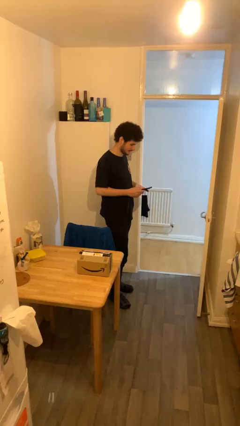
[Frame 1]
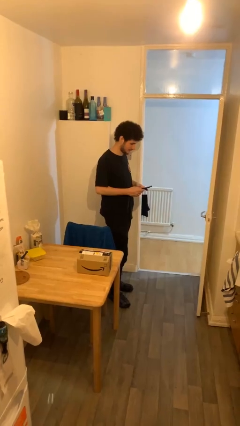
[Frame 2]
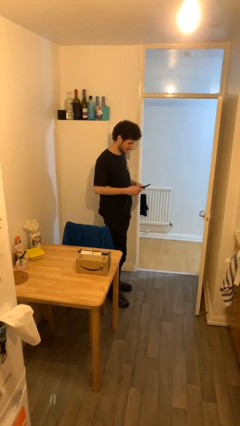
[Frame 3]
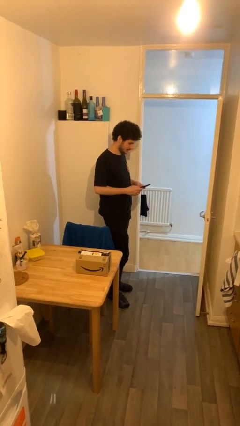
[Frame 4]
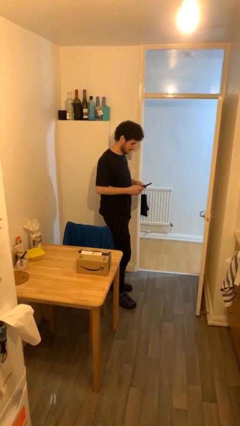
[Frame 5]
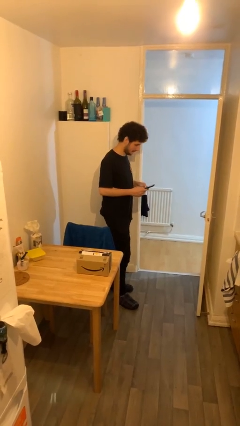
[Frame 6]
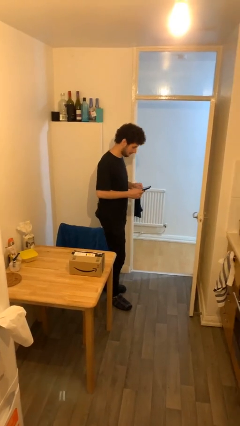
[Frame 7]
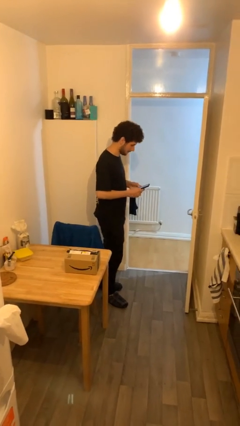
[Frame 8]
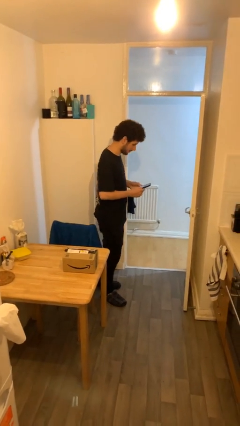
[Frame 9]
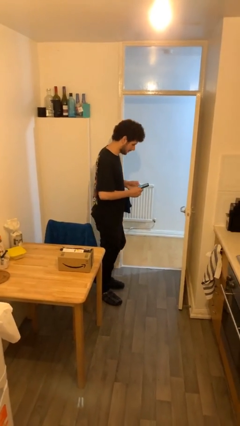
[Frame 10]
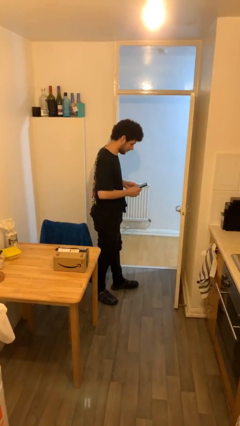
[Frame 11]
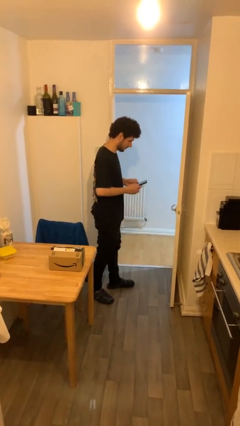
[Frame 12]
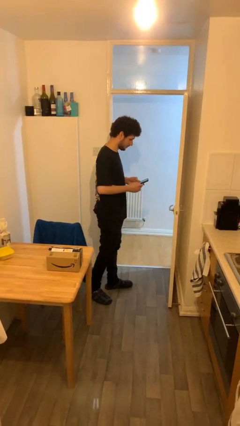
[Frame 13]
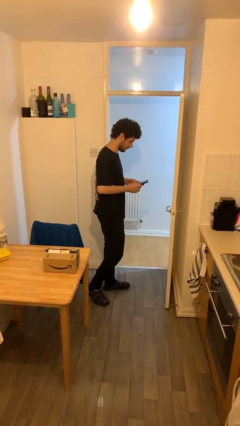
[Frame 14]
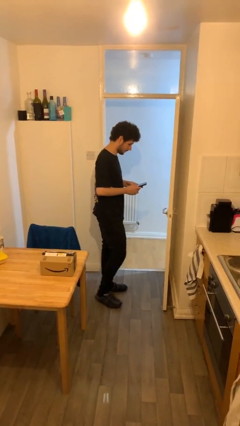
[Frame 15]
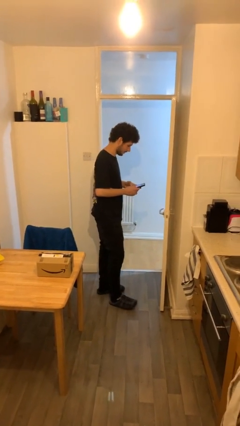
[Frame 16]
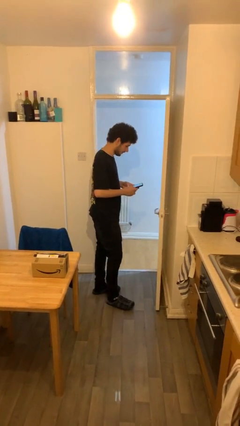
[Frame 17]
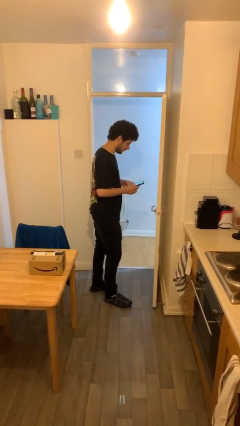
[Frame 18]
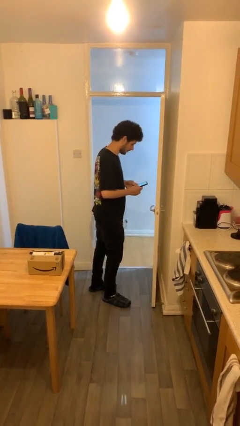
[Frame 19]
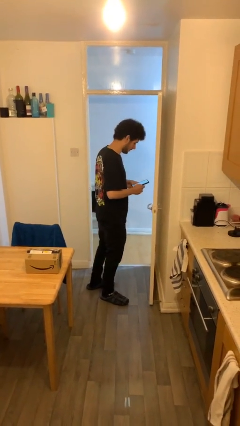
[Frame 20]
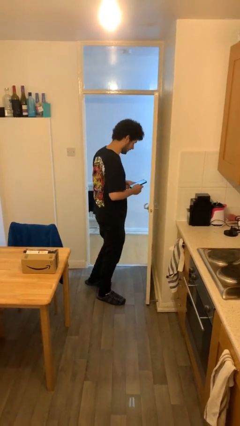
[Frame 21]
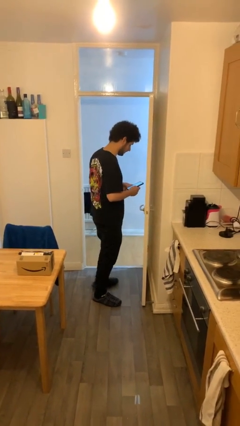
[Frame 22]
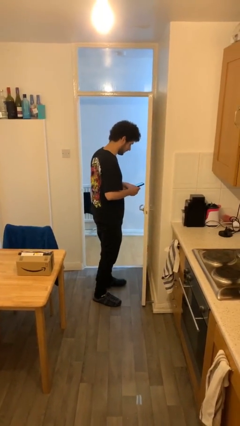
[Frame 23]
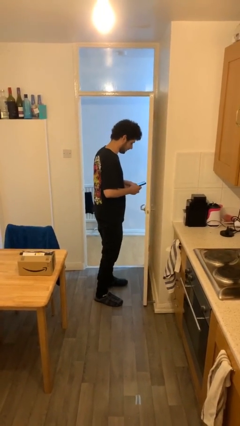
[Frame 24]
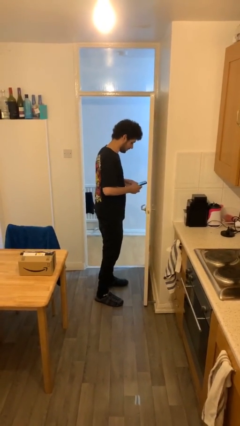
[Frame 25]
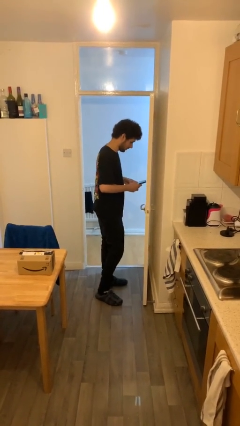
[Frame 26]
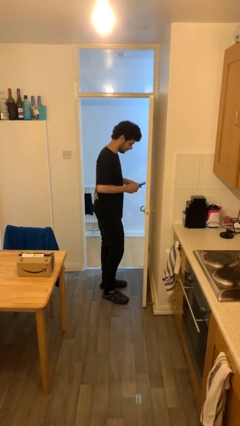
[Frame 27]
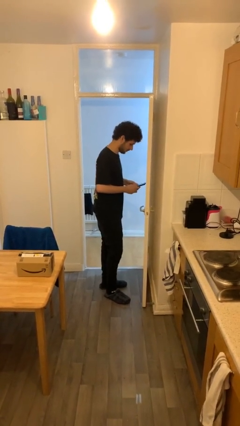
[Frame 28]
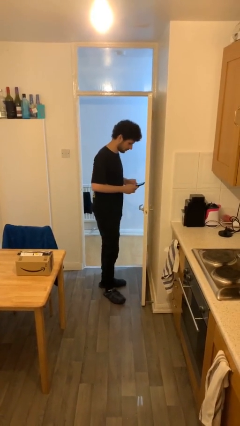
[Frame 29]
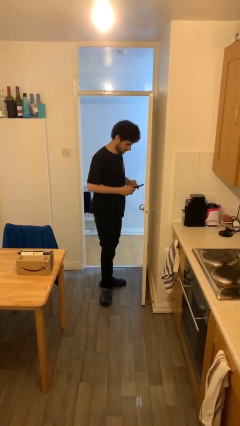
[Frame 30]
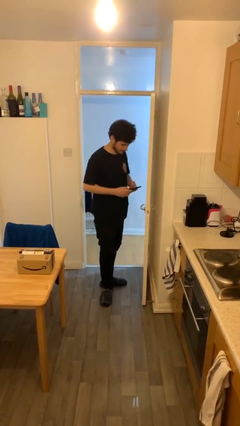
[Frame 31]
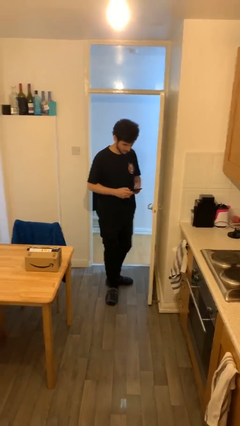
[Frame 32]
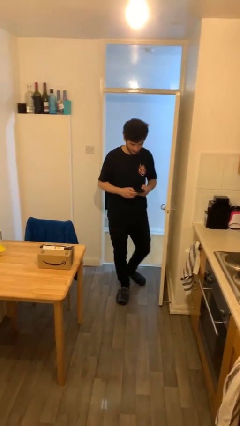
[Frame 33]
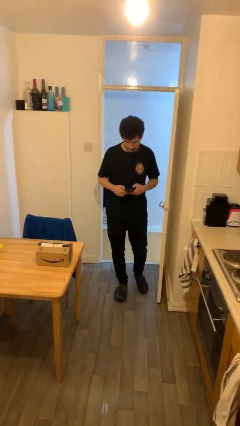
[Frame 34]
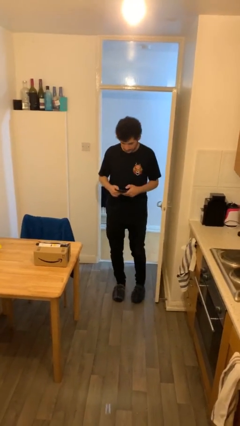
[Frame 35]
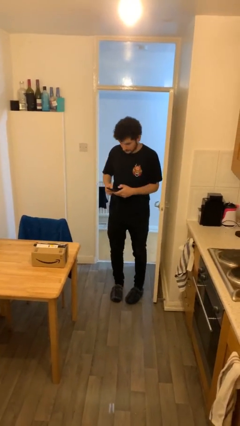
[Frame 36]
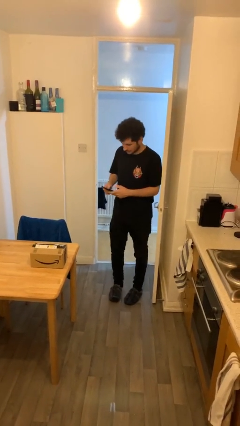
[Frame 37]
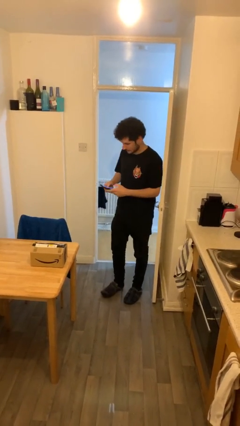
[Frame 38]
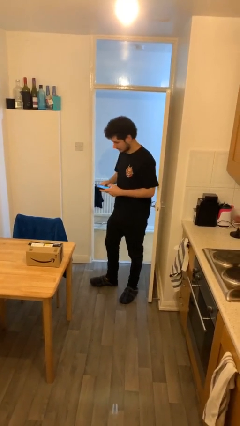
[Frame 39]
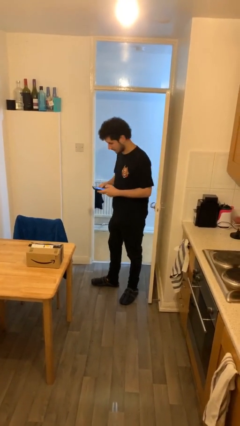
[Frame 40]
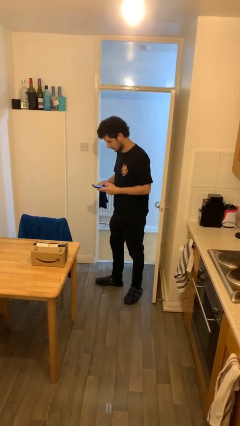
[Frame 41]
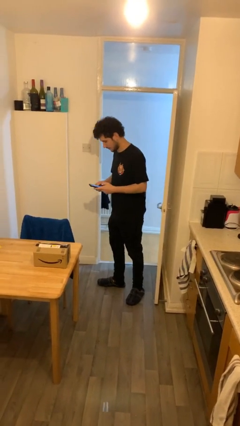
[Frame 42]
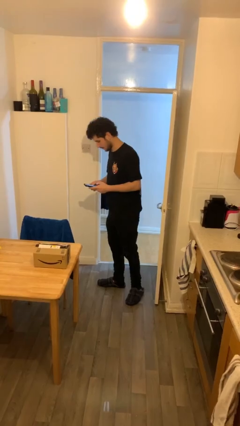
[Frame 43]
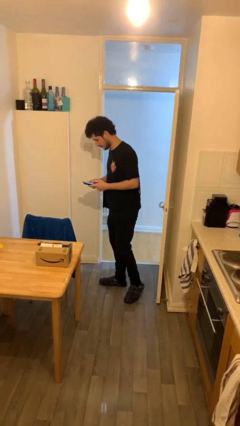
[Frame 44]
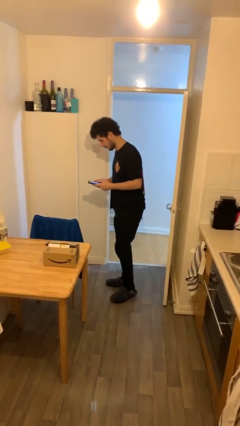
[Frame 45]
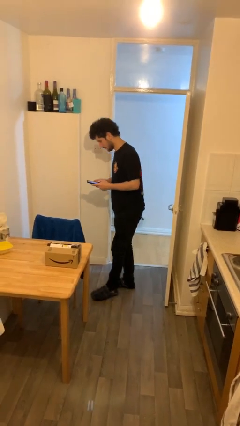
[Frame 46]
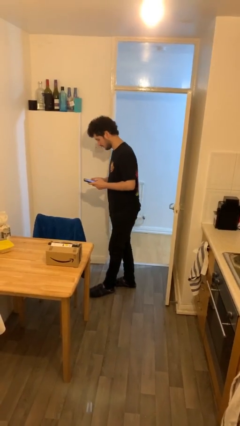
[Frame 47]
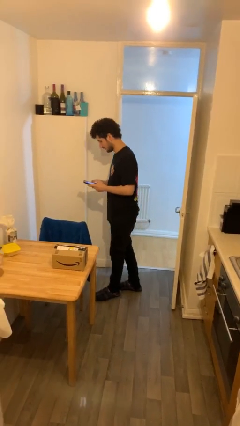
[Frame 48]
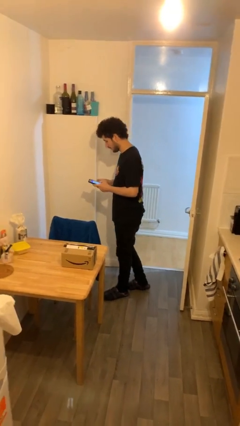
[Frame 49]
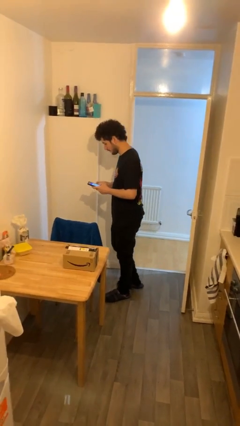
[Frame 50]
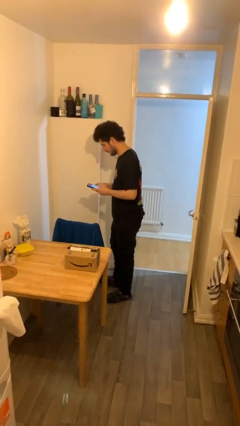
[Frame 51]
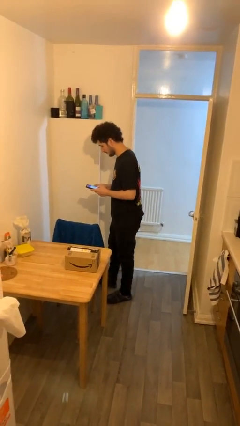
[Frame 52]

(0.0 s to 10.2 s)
person texts on phone

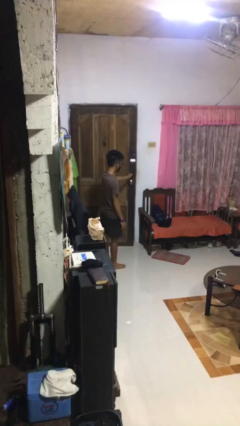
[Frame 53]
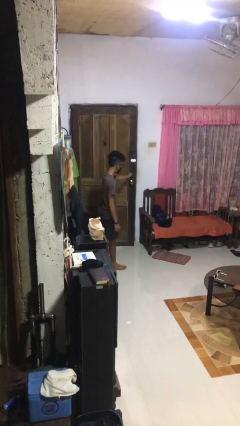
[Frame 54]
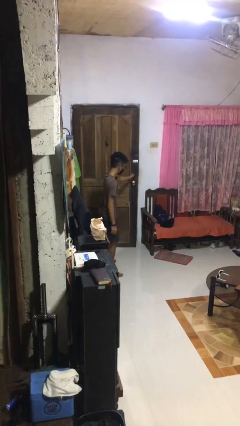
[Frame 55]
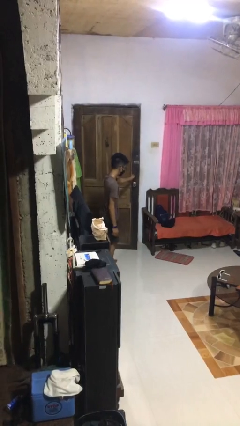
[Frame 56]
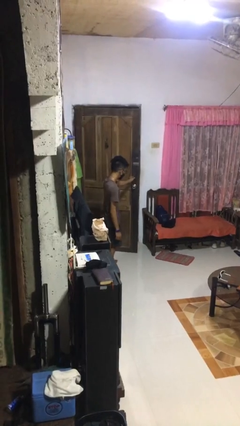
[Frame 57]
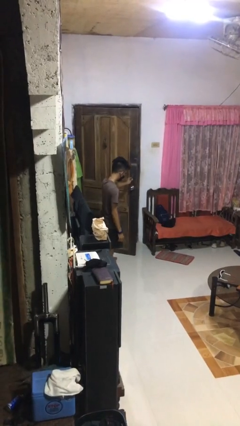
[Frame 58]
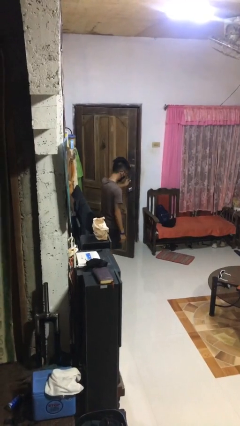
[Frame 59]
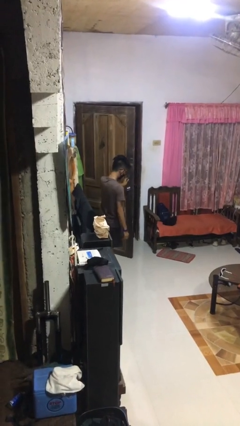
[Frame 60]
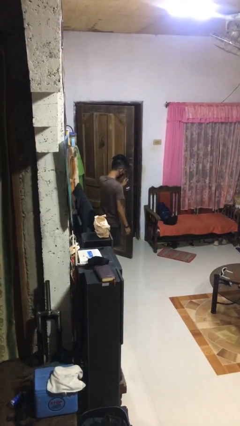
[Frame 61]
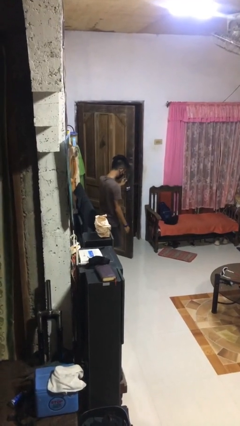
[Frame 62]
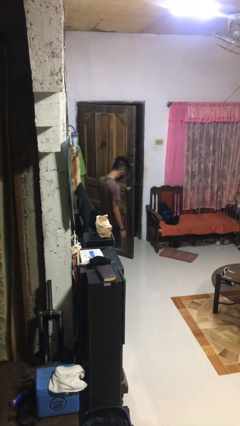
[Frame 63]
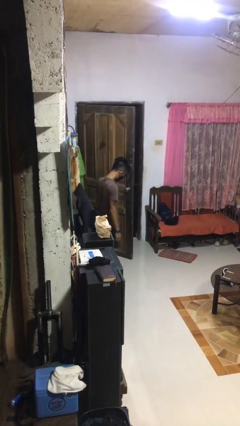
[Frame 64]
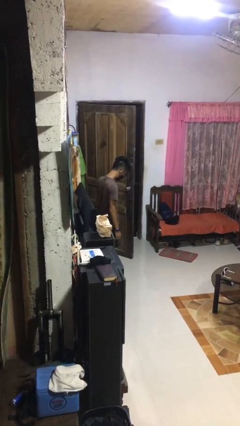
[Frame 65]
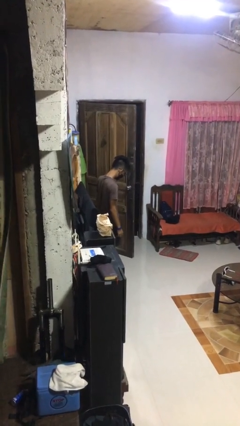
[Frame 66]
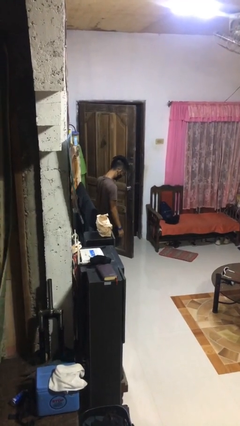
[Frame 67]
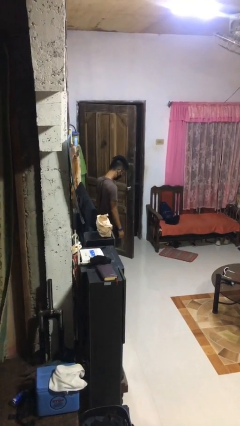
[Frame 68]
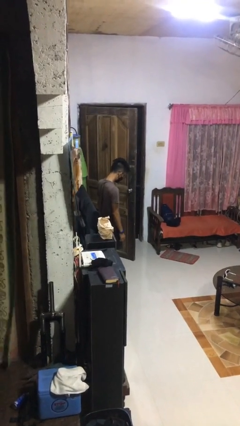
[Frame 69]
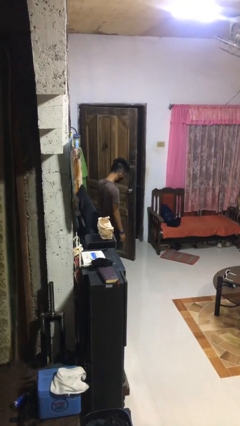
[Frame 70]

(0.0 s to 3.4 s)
person opens facility door

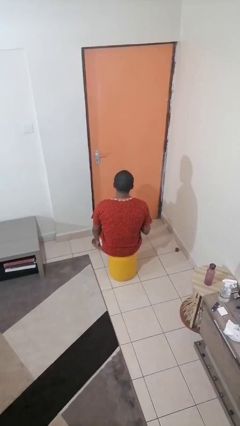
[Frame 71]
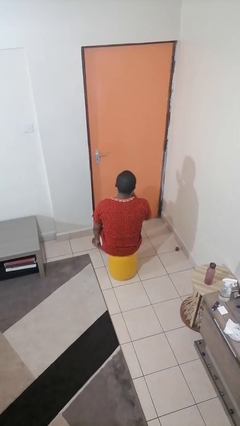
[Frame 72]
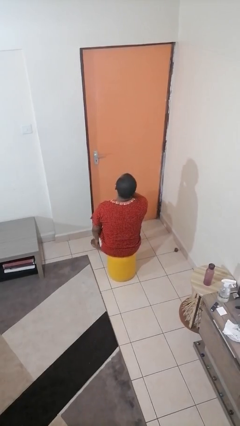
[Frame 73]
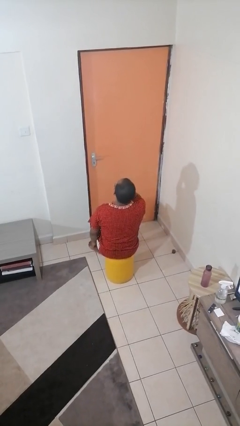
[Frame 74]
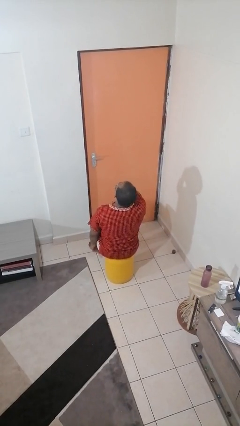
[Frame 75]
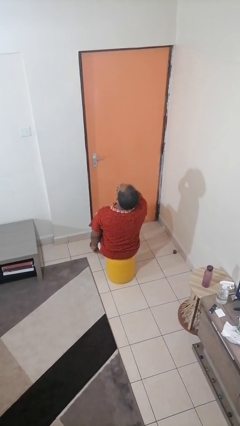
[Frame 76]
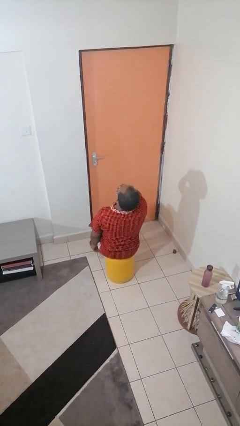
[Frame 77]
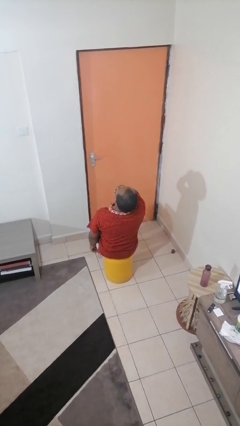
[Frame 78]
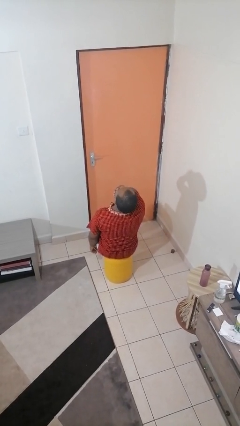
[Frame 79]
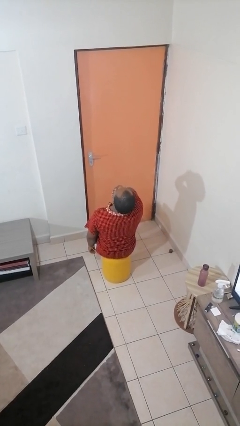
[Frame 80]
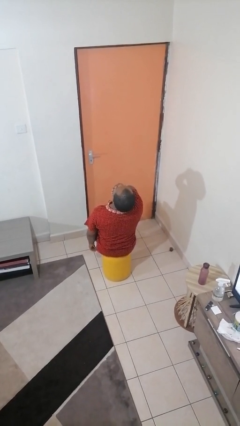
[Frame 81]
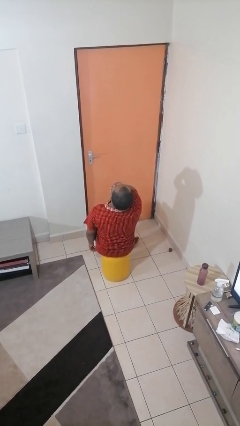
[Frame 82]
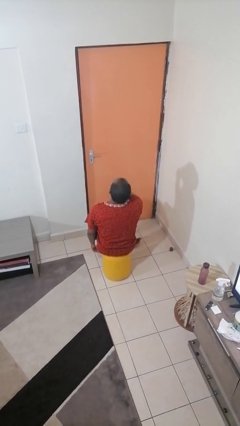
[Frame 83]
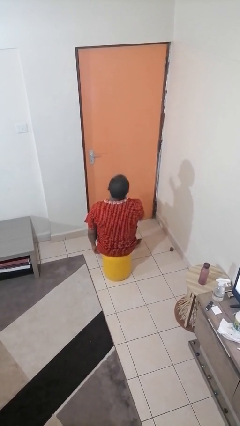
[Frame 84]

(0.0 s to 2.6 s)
person yawns

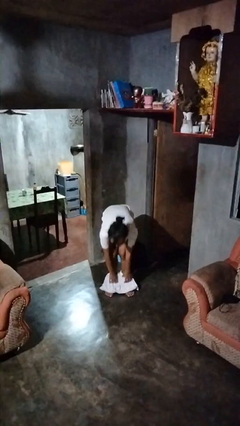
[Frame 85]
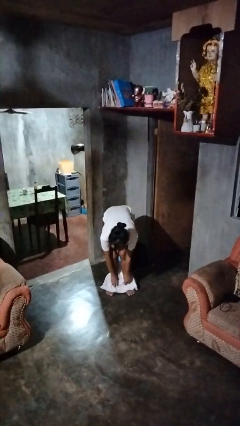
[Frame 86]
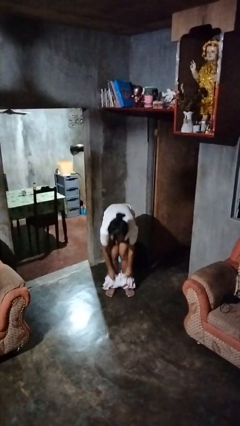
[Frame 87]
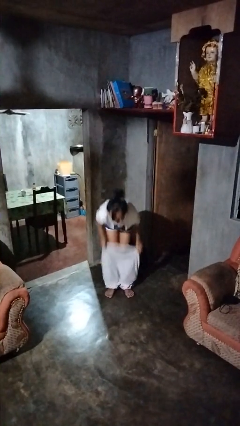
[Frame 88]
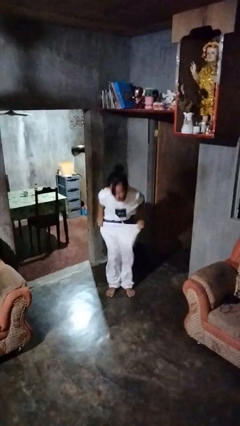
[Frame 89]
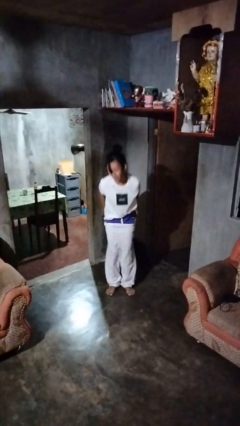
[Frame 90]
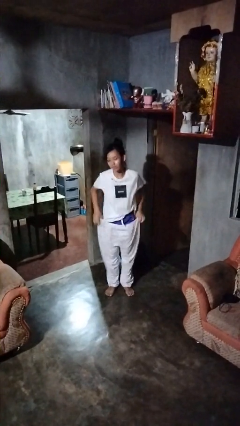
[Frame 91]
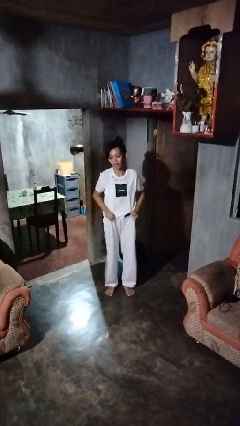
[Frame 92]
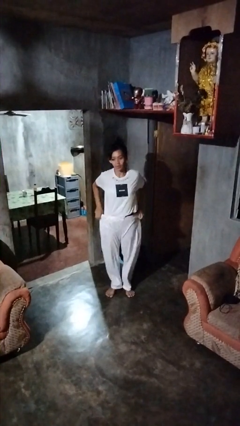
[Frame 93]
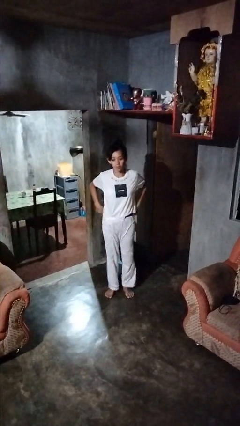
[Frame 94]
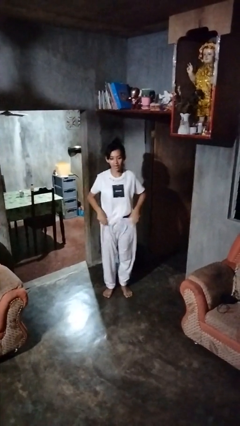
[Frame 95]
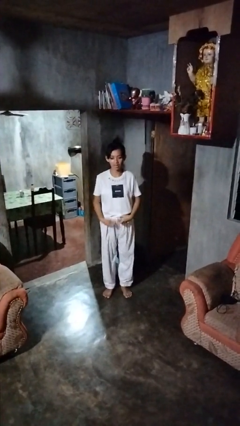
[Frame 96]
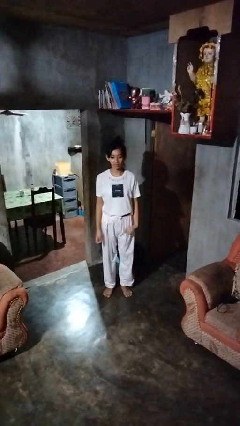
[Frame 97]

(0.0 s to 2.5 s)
person puts on pants
